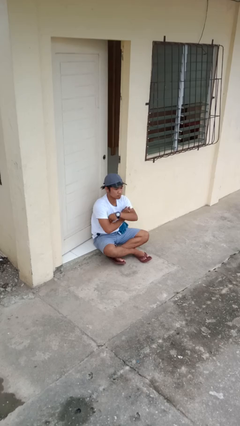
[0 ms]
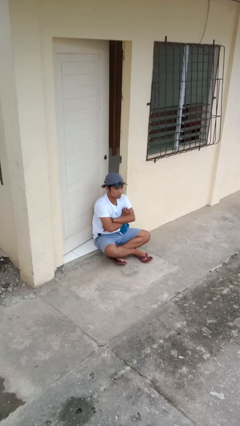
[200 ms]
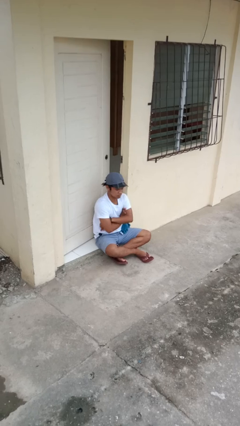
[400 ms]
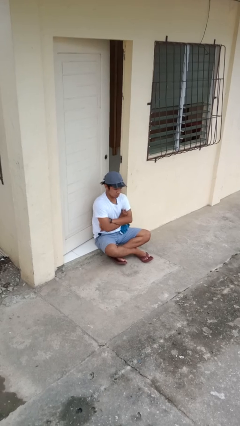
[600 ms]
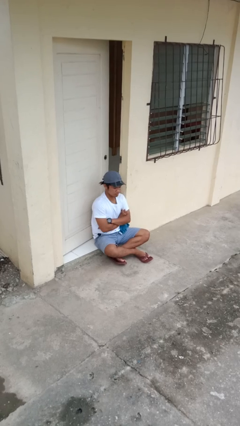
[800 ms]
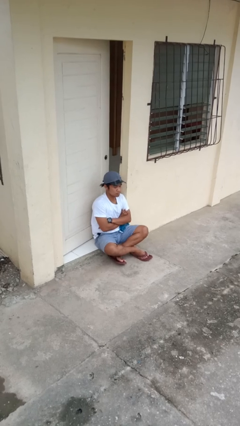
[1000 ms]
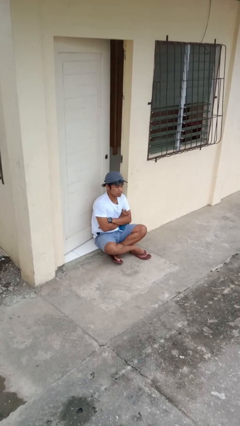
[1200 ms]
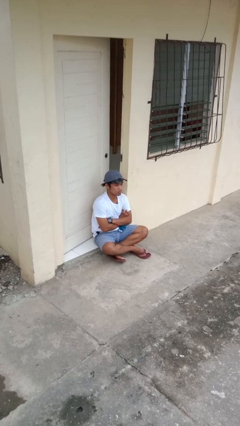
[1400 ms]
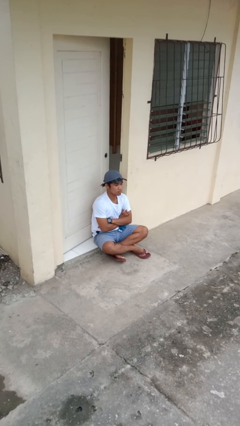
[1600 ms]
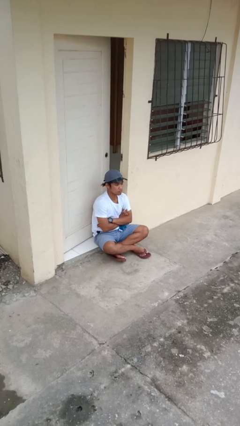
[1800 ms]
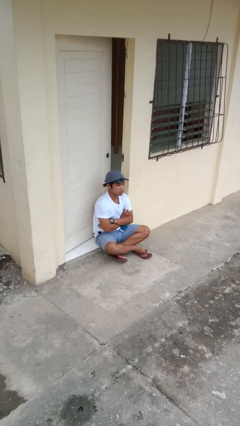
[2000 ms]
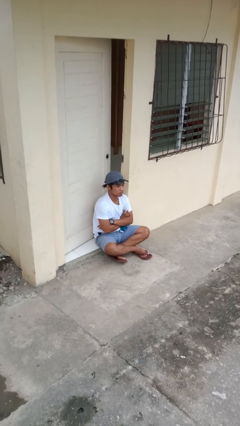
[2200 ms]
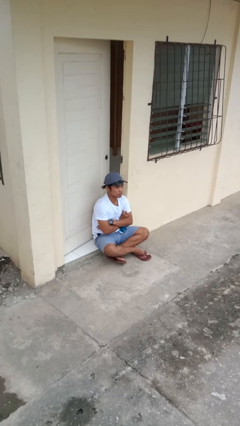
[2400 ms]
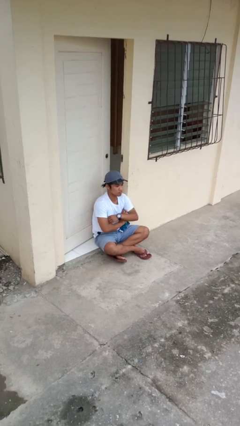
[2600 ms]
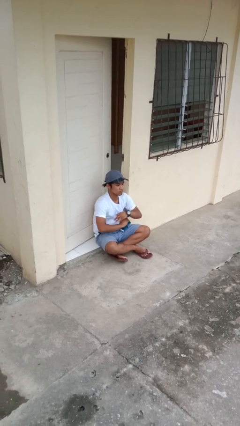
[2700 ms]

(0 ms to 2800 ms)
person crosses arms

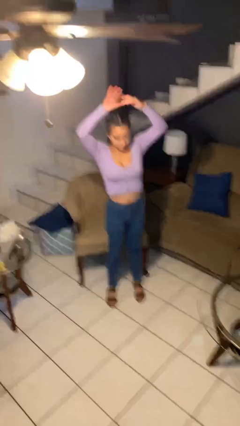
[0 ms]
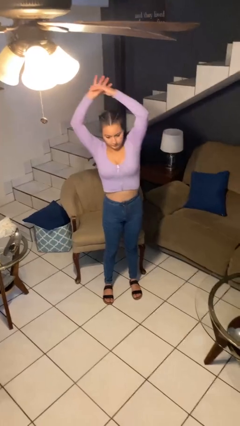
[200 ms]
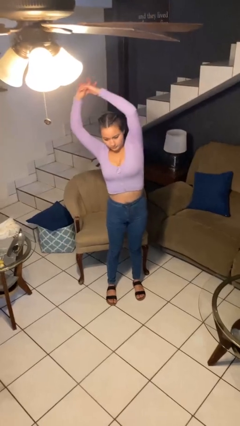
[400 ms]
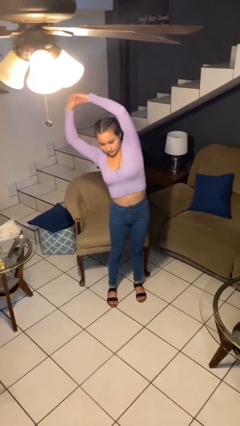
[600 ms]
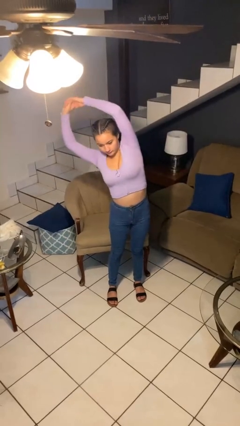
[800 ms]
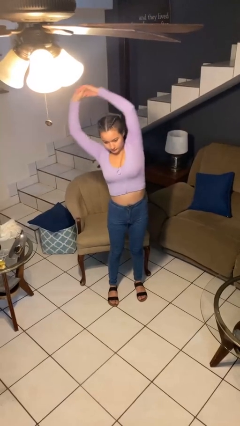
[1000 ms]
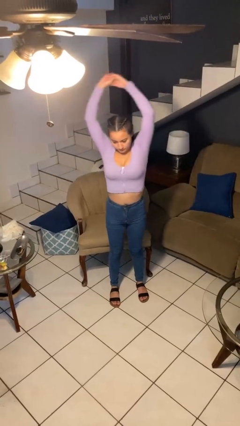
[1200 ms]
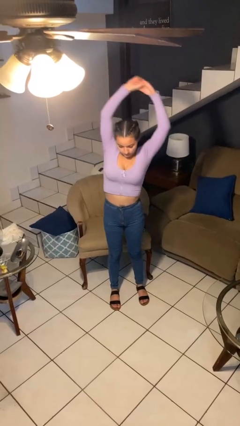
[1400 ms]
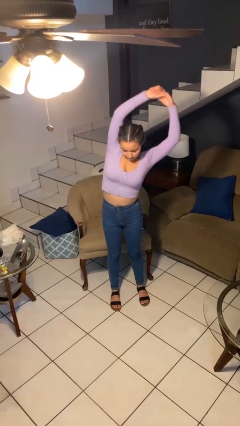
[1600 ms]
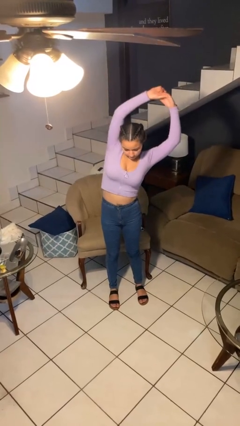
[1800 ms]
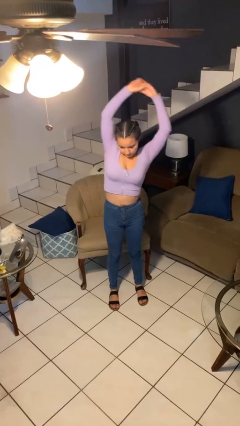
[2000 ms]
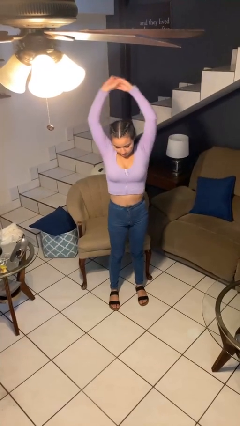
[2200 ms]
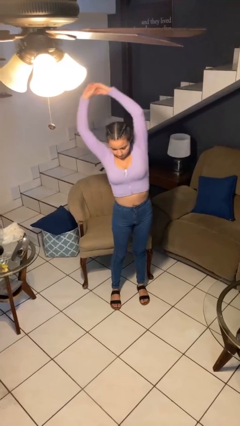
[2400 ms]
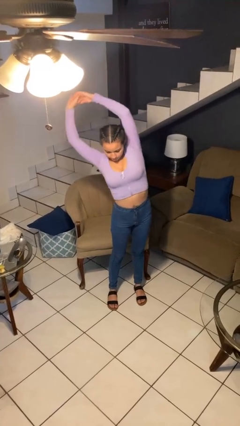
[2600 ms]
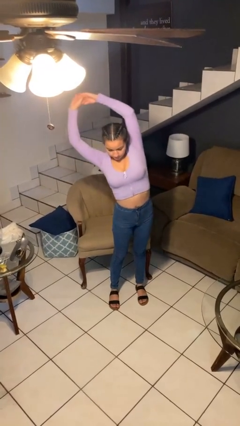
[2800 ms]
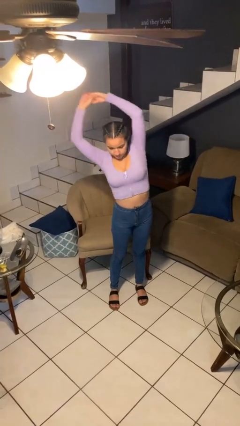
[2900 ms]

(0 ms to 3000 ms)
person stretches arms over head

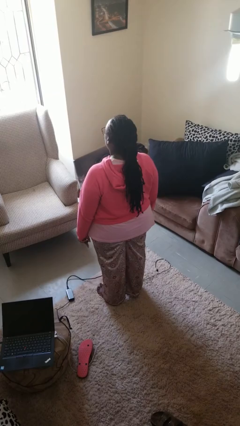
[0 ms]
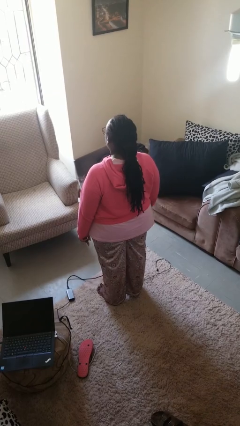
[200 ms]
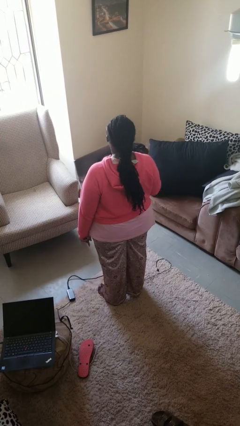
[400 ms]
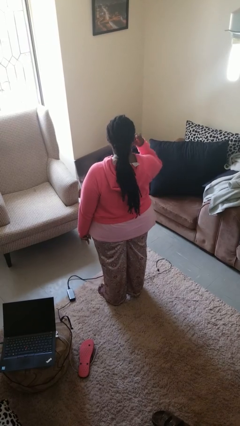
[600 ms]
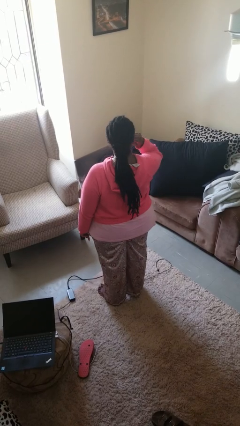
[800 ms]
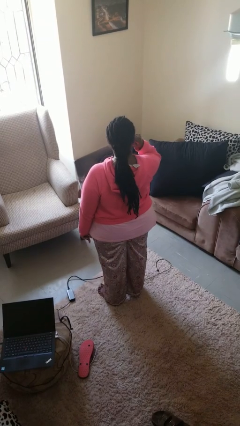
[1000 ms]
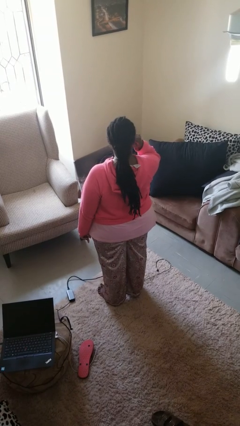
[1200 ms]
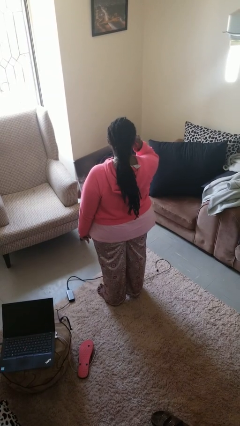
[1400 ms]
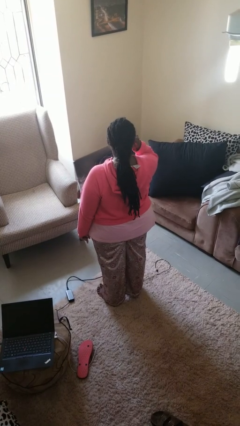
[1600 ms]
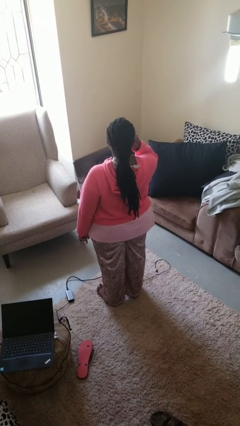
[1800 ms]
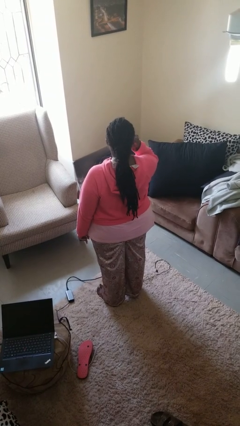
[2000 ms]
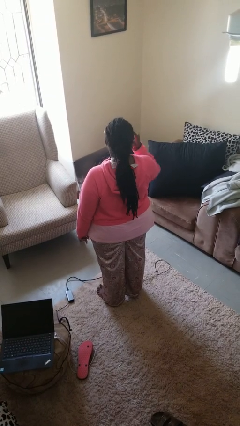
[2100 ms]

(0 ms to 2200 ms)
person gestures listen closely

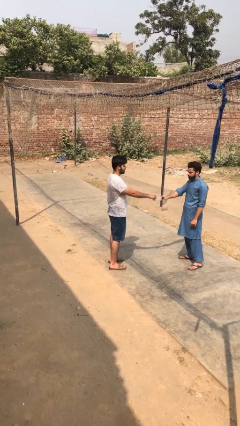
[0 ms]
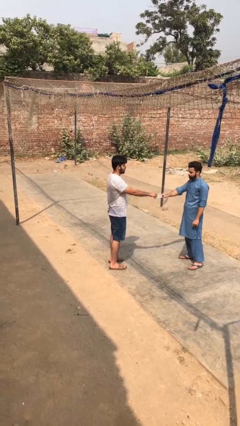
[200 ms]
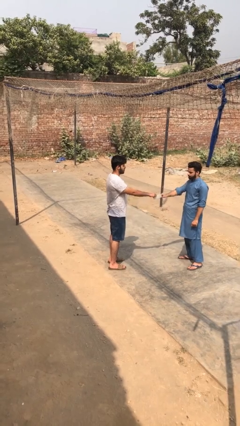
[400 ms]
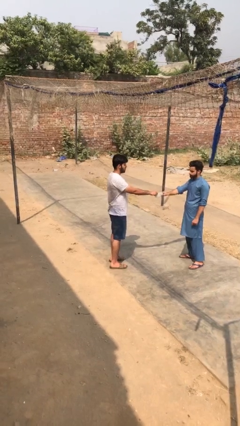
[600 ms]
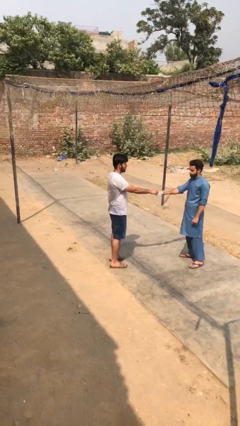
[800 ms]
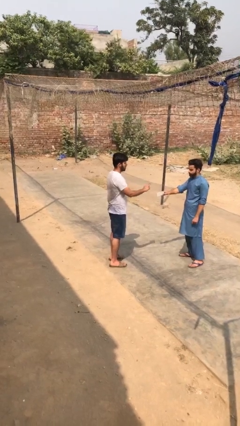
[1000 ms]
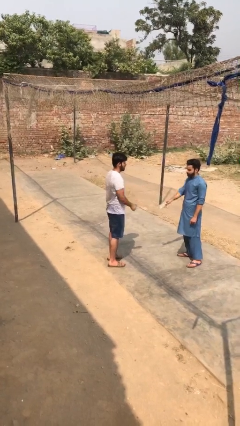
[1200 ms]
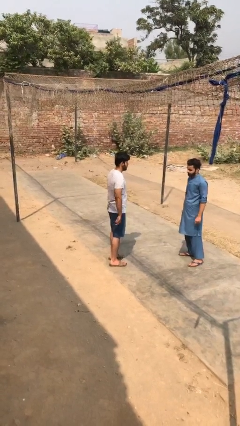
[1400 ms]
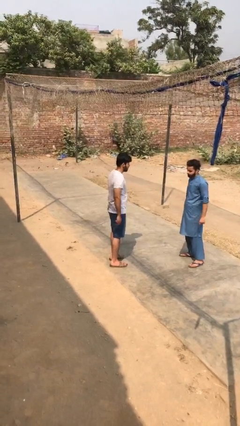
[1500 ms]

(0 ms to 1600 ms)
person transfers object to person

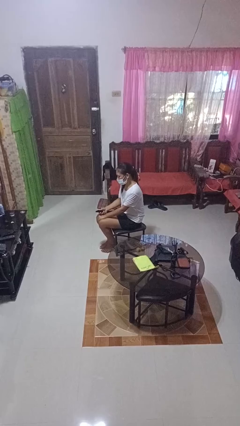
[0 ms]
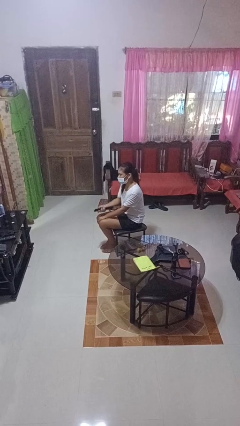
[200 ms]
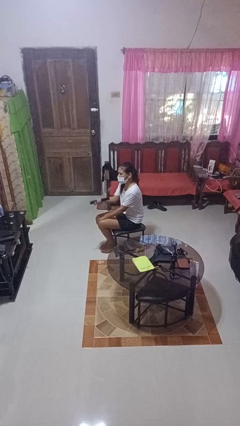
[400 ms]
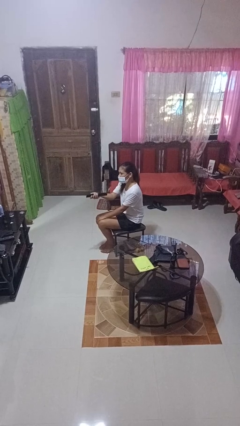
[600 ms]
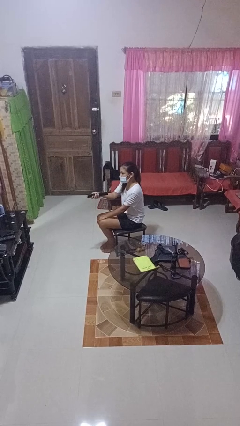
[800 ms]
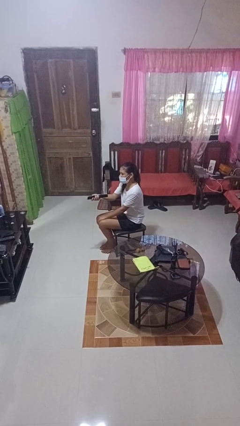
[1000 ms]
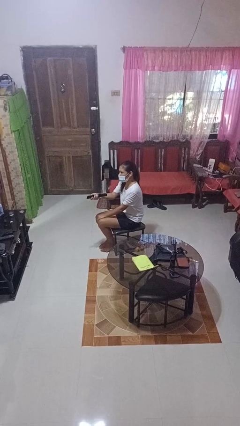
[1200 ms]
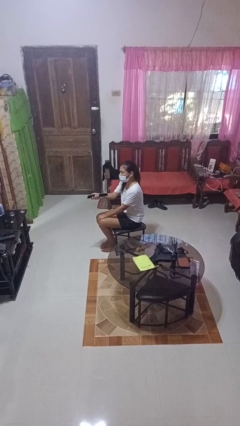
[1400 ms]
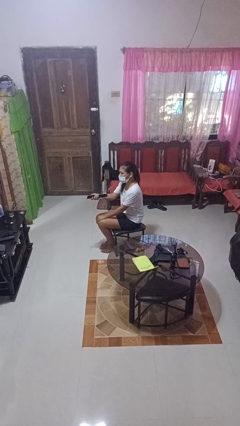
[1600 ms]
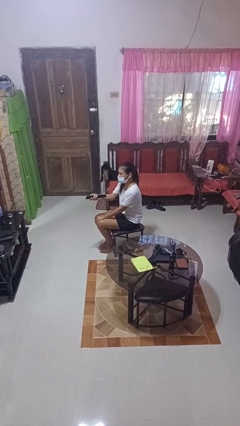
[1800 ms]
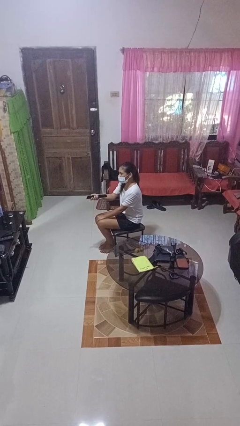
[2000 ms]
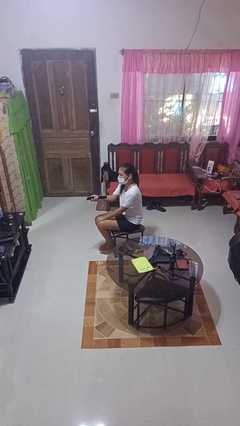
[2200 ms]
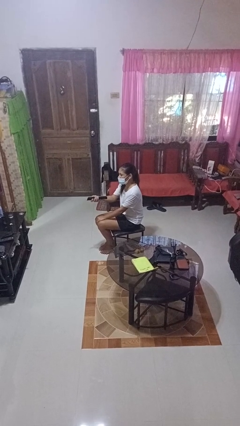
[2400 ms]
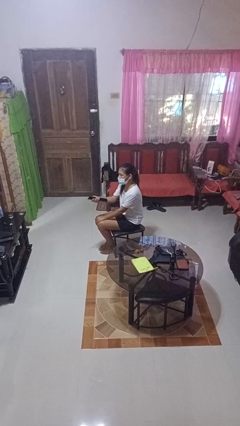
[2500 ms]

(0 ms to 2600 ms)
person uses television remote

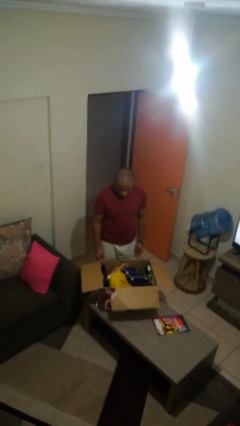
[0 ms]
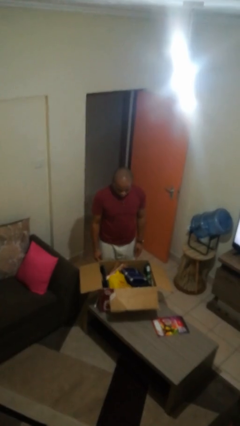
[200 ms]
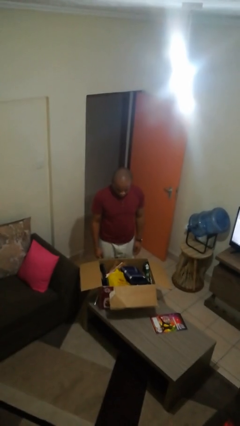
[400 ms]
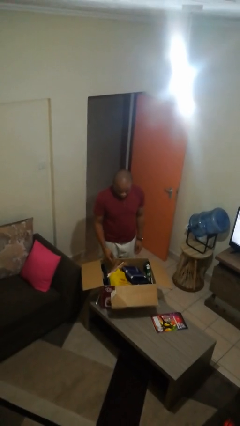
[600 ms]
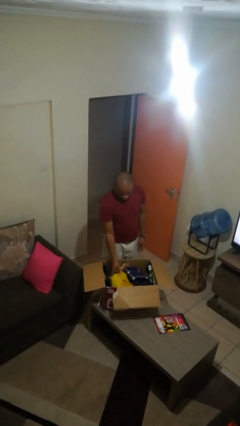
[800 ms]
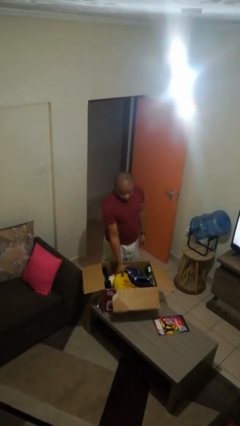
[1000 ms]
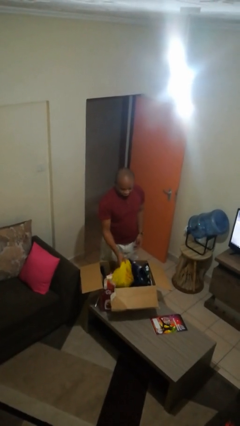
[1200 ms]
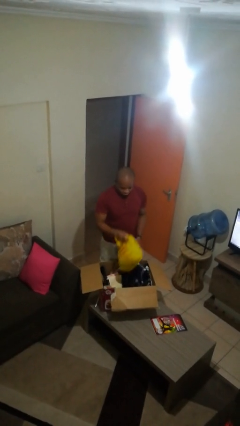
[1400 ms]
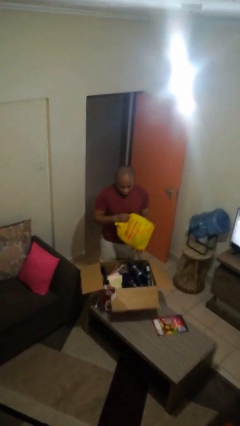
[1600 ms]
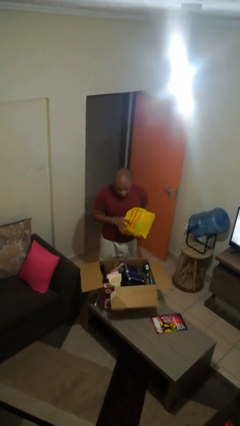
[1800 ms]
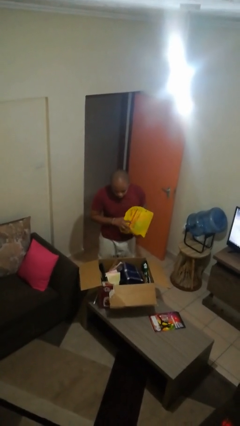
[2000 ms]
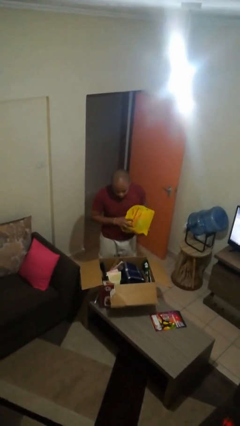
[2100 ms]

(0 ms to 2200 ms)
person takes object from box

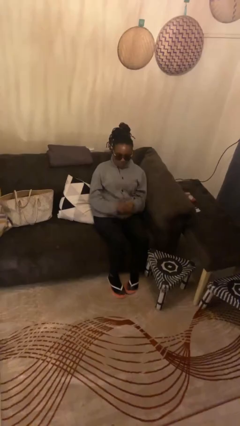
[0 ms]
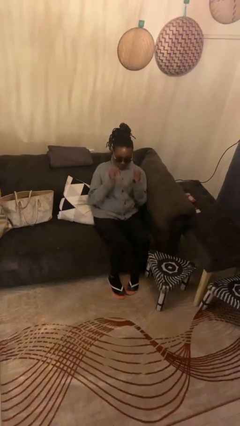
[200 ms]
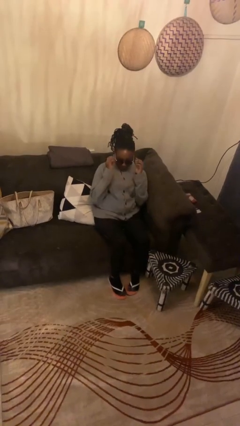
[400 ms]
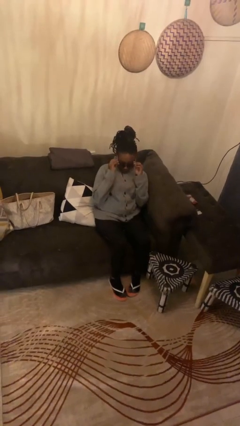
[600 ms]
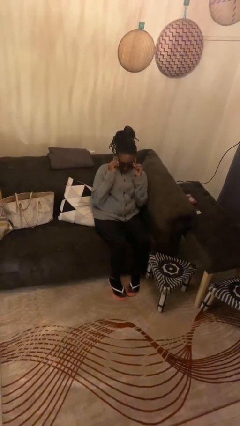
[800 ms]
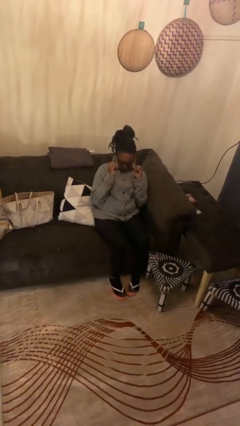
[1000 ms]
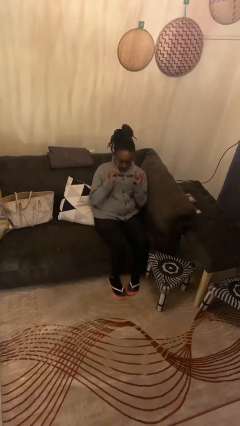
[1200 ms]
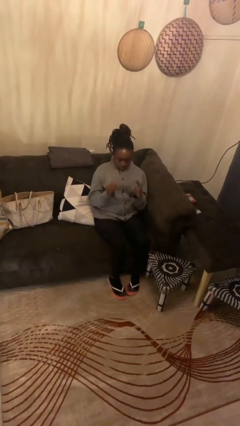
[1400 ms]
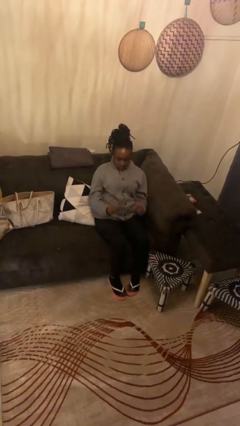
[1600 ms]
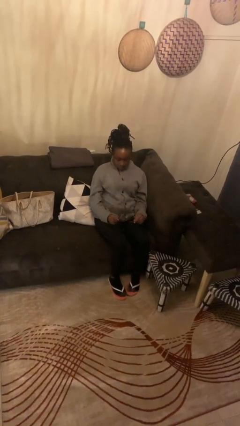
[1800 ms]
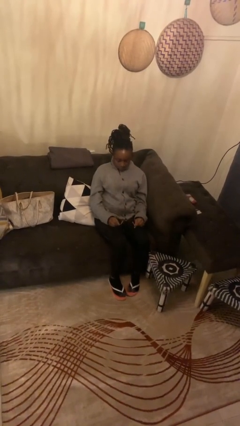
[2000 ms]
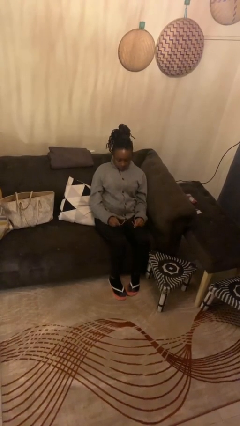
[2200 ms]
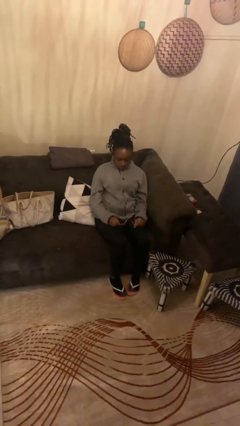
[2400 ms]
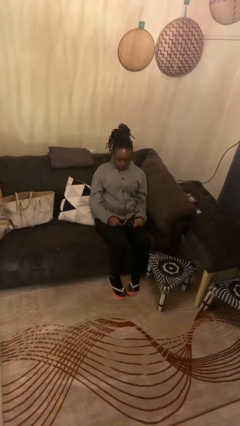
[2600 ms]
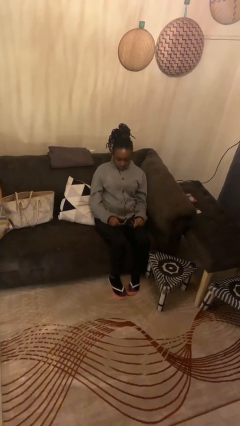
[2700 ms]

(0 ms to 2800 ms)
person takes off sunglasses
